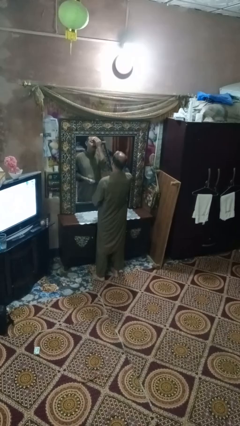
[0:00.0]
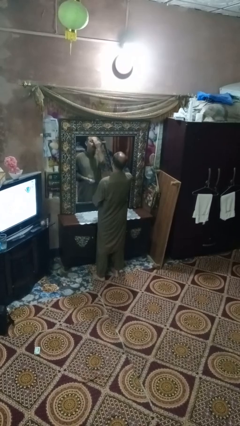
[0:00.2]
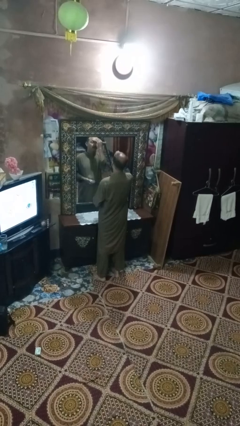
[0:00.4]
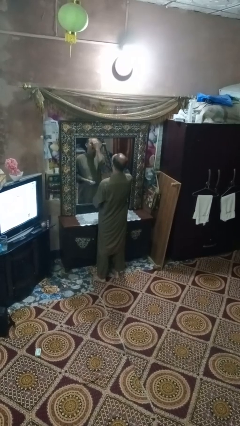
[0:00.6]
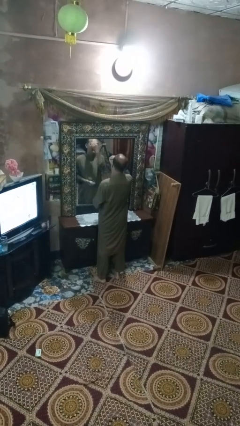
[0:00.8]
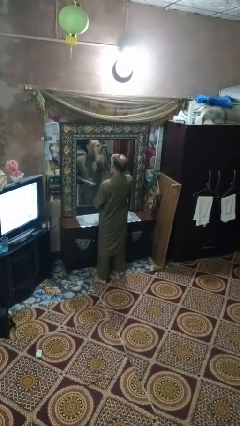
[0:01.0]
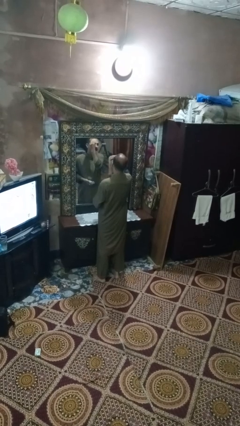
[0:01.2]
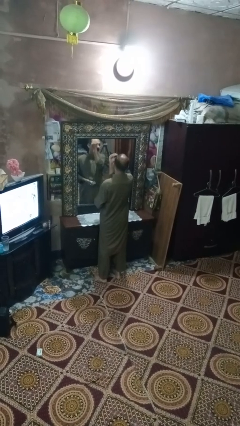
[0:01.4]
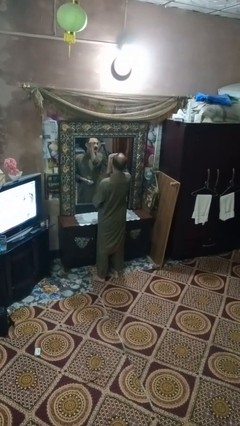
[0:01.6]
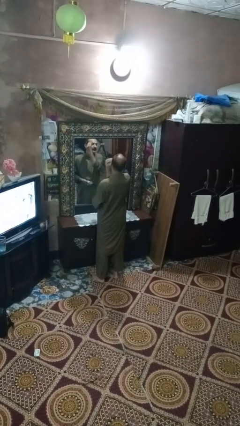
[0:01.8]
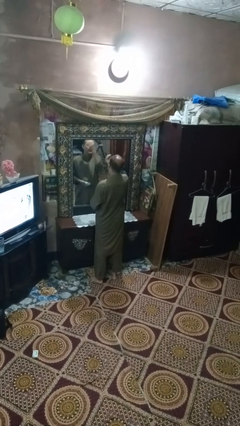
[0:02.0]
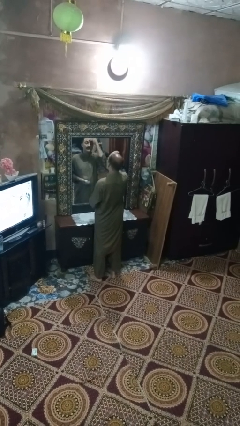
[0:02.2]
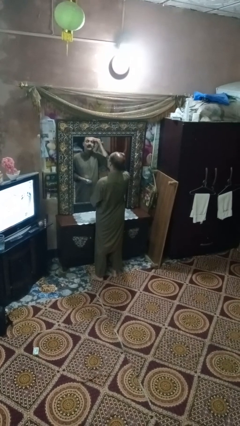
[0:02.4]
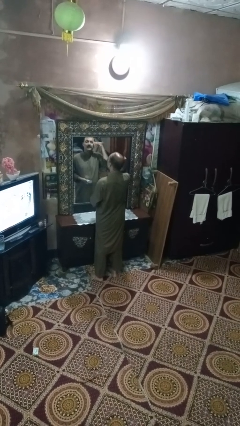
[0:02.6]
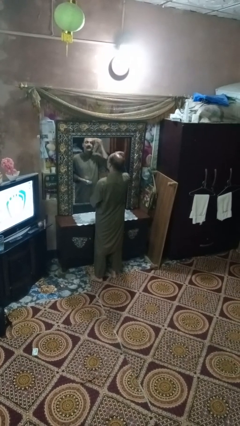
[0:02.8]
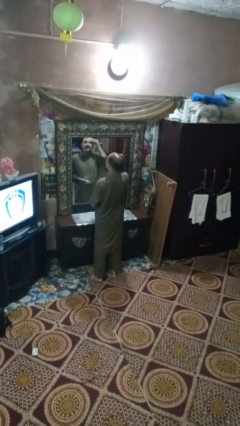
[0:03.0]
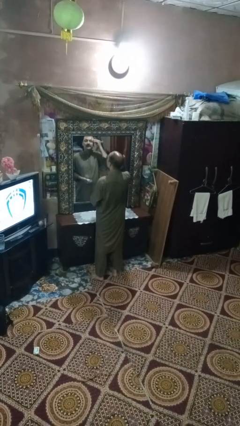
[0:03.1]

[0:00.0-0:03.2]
person applies foundation makeup

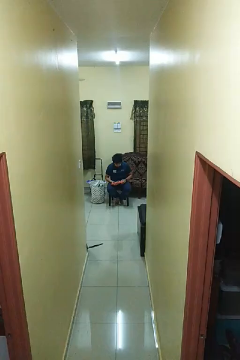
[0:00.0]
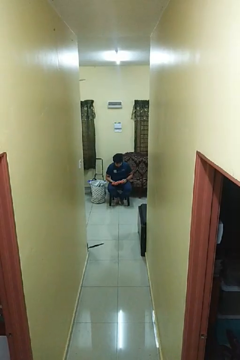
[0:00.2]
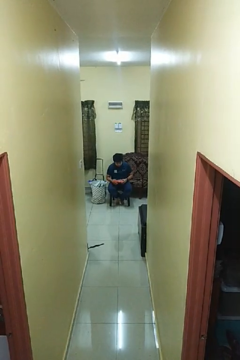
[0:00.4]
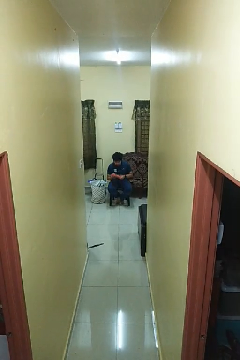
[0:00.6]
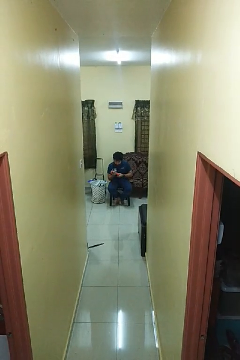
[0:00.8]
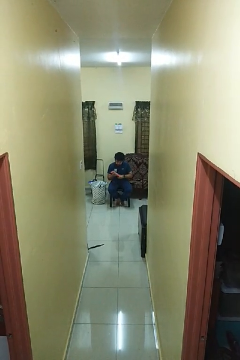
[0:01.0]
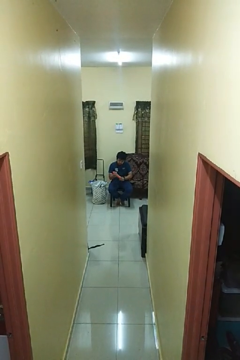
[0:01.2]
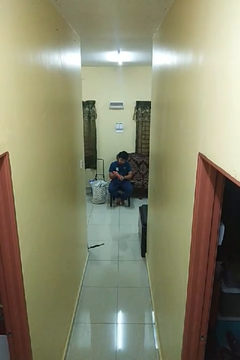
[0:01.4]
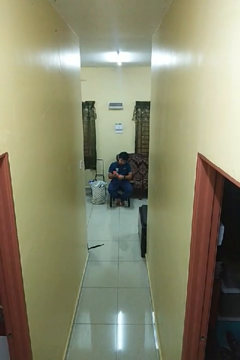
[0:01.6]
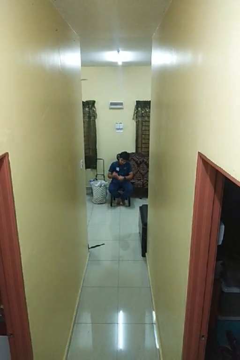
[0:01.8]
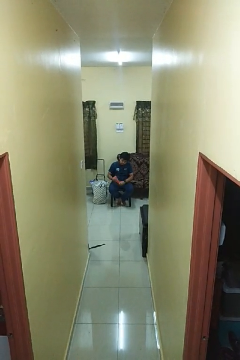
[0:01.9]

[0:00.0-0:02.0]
person squeezes object

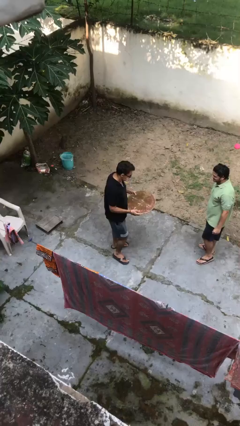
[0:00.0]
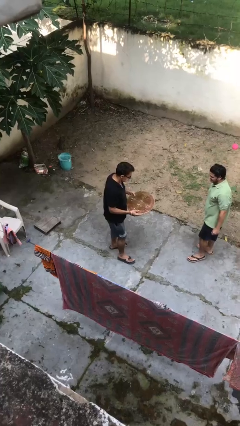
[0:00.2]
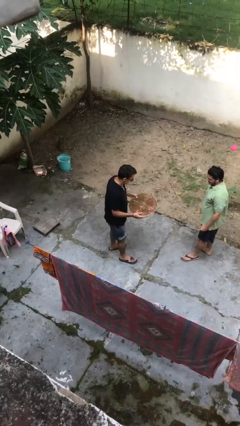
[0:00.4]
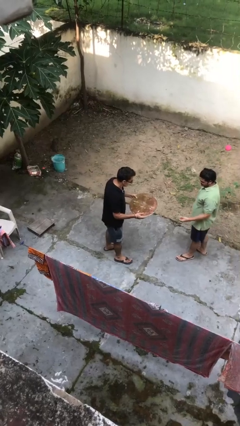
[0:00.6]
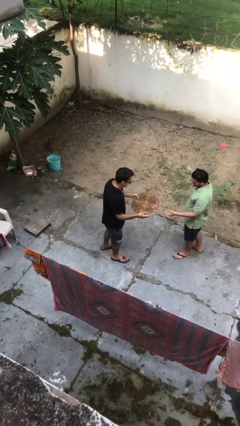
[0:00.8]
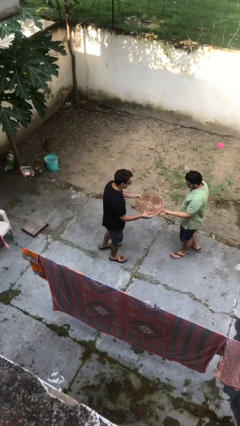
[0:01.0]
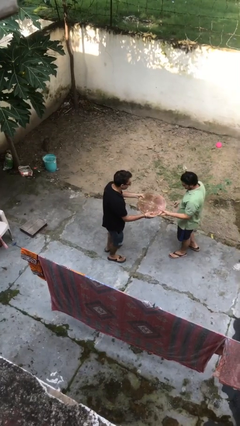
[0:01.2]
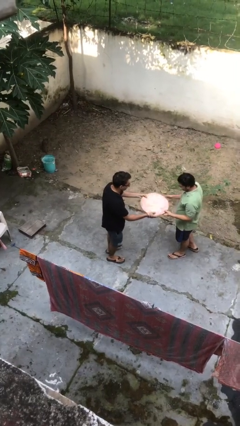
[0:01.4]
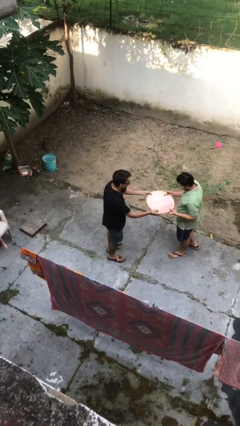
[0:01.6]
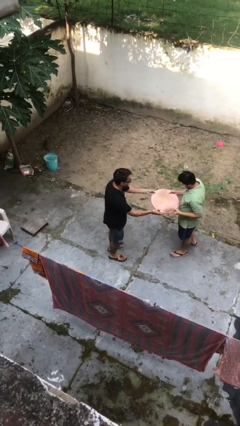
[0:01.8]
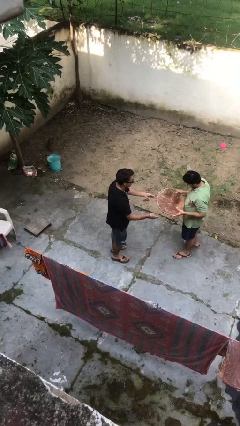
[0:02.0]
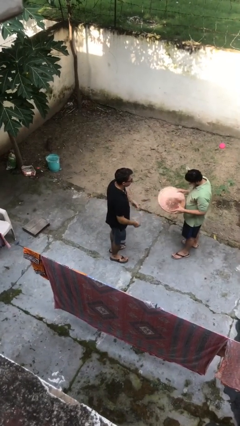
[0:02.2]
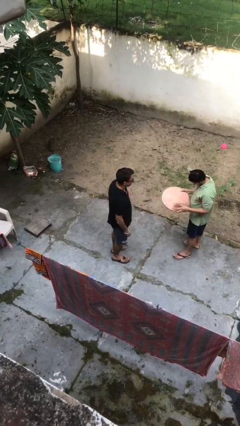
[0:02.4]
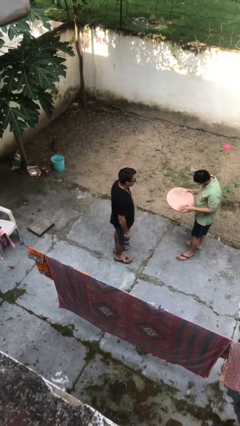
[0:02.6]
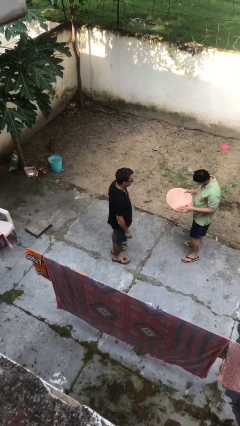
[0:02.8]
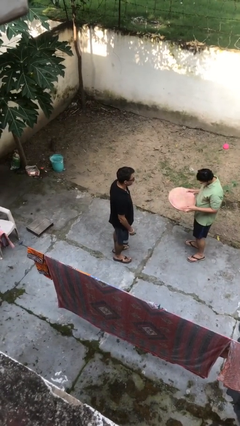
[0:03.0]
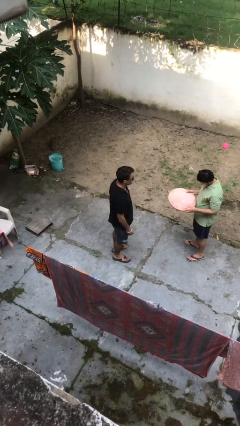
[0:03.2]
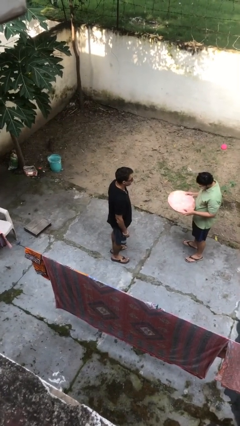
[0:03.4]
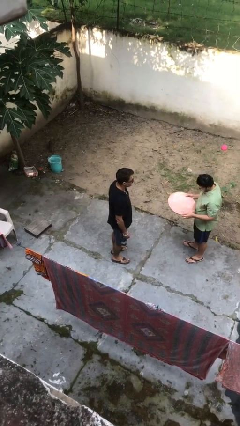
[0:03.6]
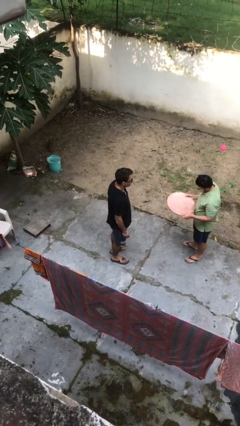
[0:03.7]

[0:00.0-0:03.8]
person transfers object to person

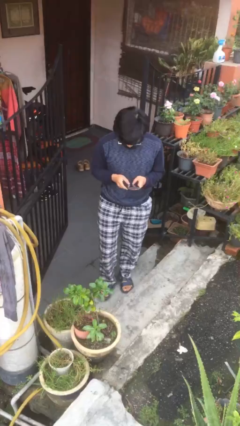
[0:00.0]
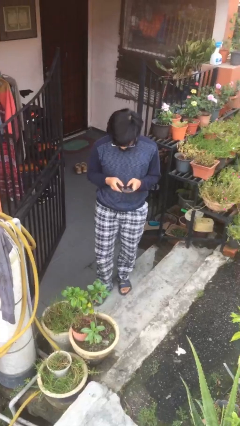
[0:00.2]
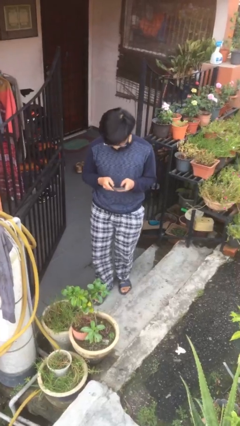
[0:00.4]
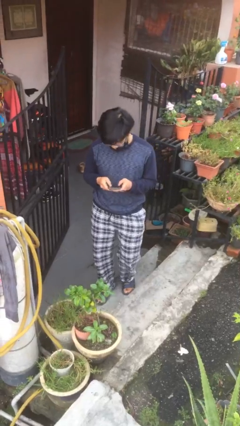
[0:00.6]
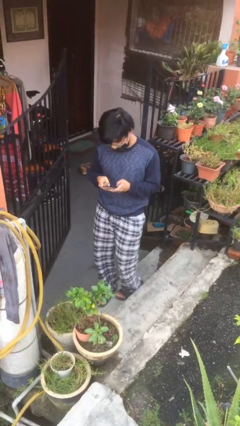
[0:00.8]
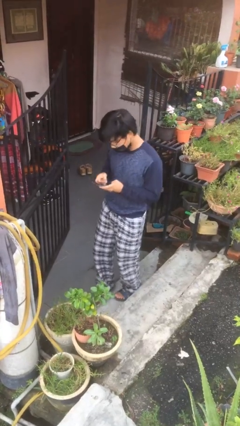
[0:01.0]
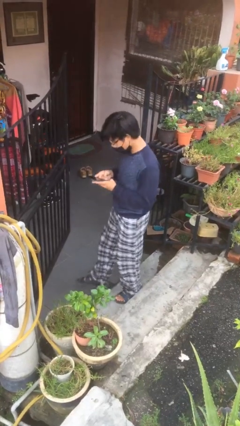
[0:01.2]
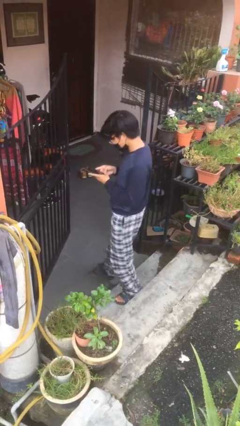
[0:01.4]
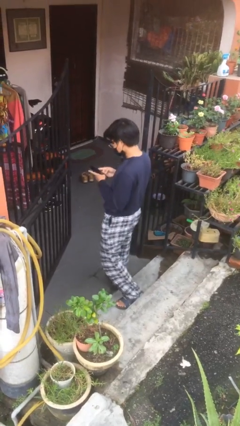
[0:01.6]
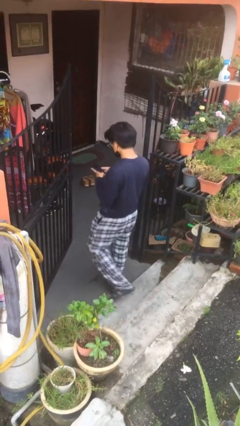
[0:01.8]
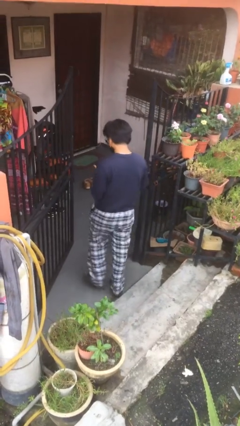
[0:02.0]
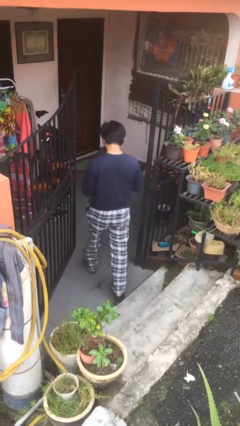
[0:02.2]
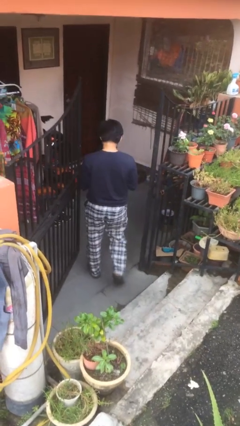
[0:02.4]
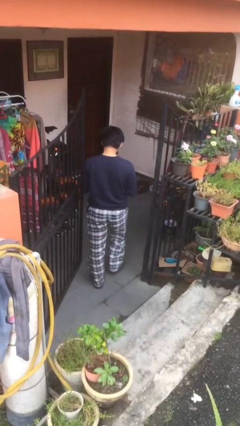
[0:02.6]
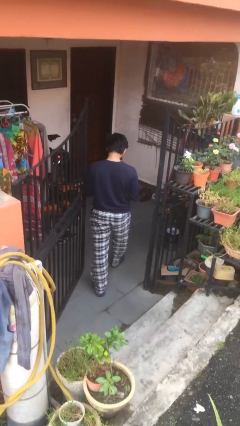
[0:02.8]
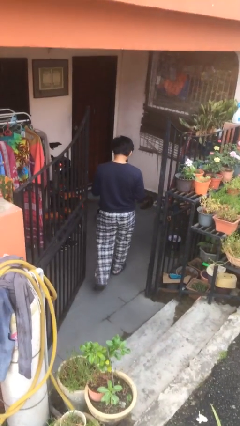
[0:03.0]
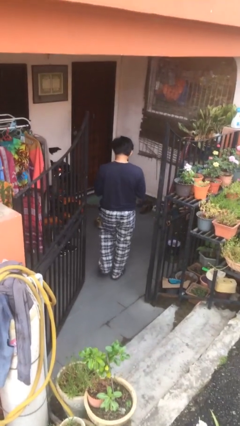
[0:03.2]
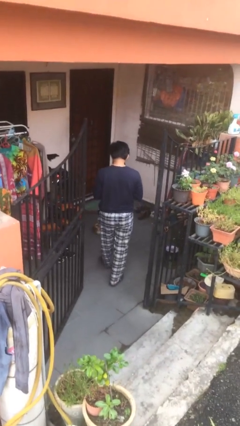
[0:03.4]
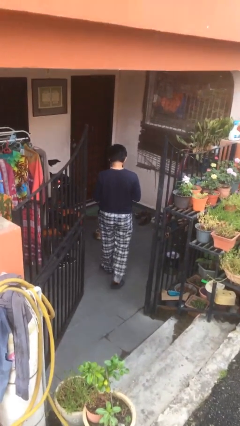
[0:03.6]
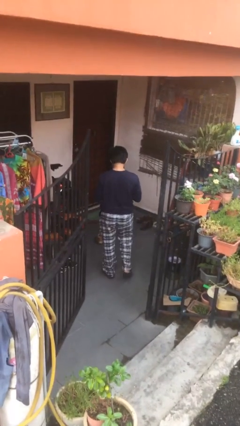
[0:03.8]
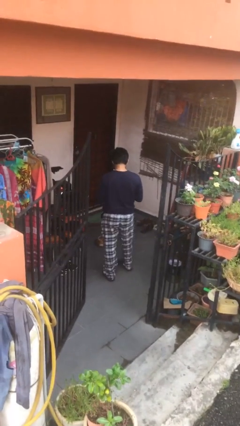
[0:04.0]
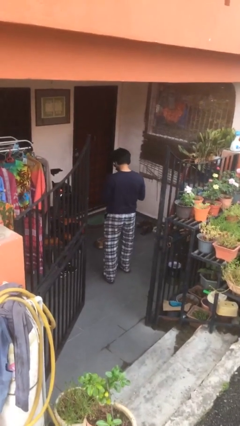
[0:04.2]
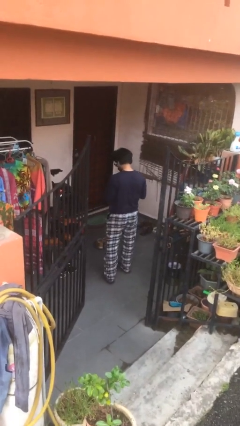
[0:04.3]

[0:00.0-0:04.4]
person exits scene through structure

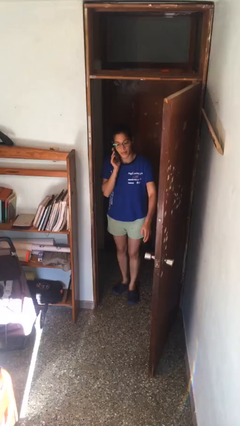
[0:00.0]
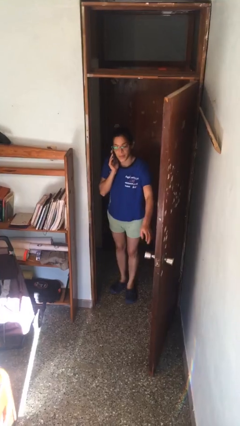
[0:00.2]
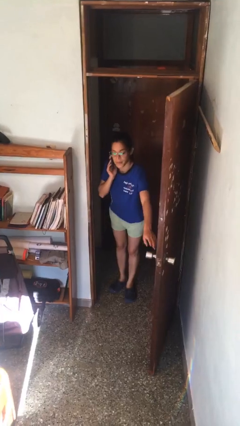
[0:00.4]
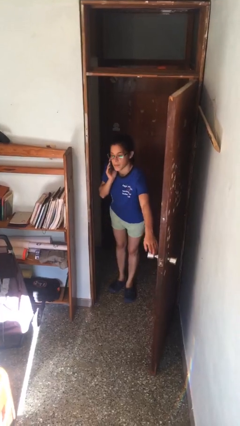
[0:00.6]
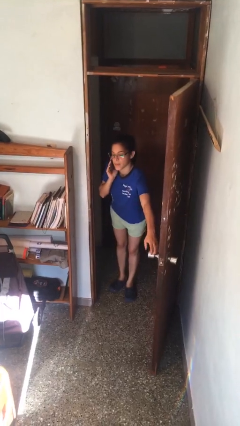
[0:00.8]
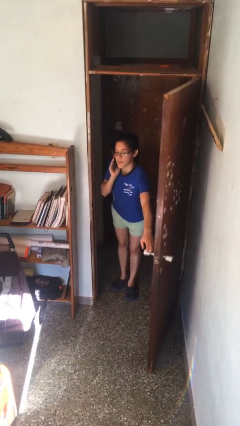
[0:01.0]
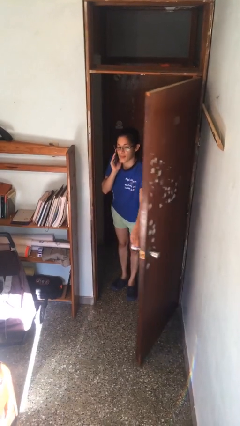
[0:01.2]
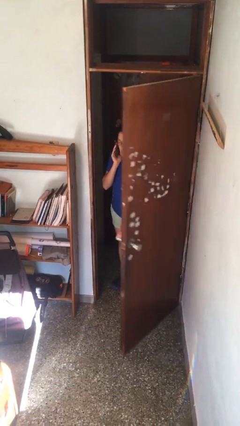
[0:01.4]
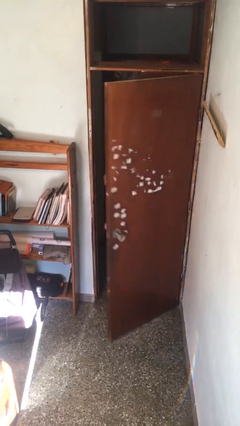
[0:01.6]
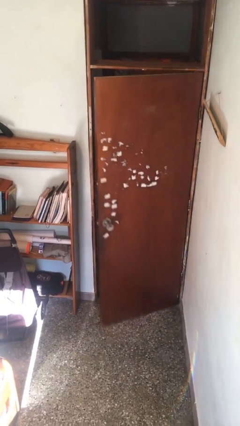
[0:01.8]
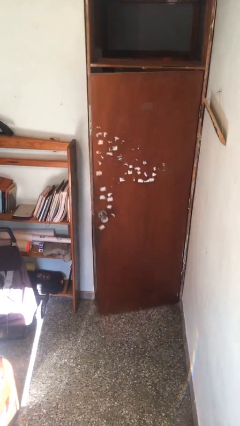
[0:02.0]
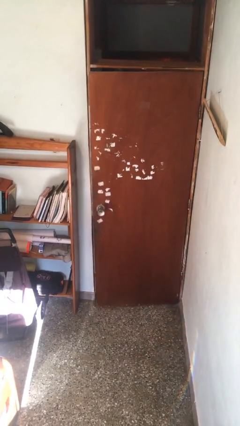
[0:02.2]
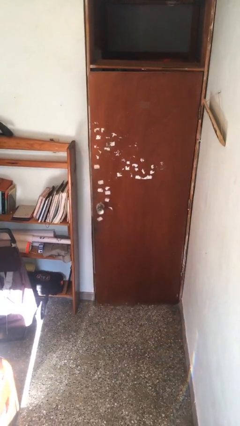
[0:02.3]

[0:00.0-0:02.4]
person closes facility door

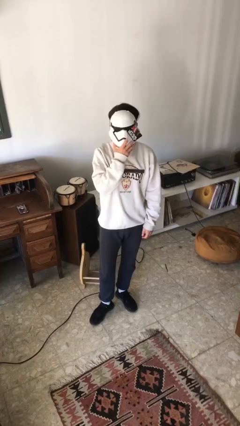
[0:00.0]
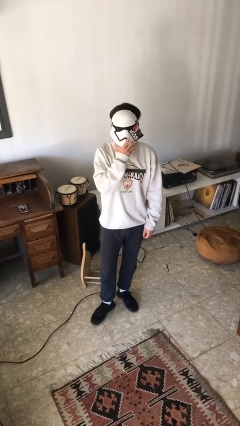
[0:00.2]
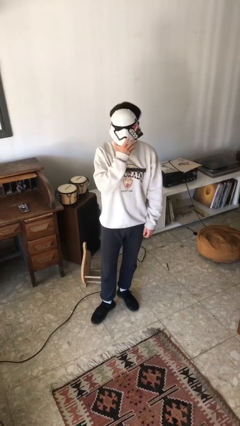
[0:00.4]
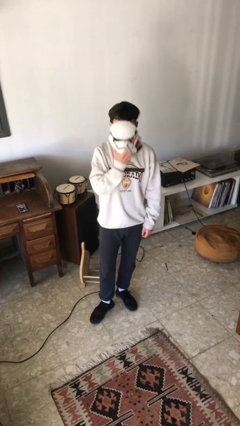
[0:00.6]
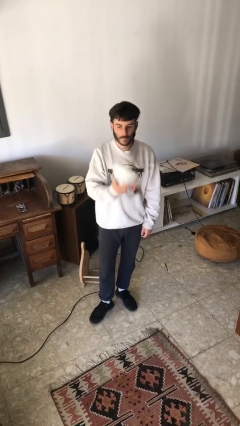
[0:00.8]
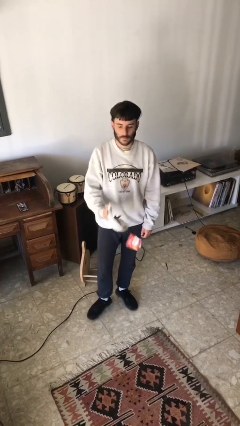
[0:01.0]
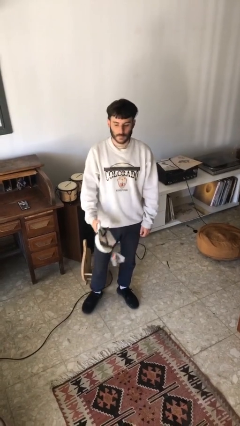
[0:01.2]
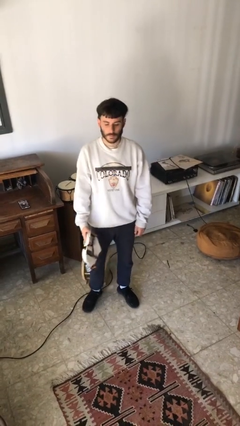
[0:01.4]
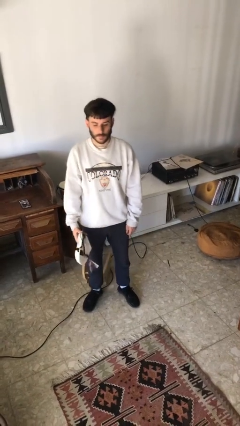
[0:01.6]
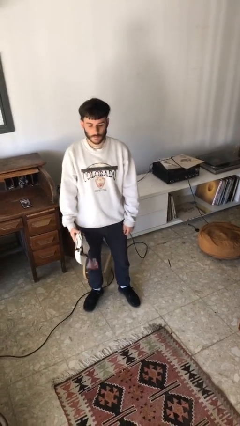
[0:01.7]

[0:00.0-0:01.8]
person takes off facemask

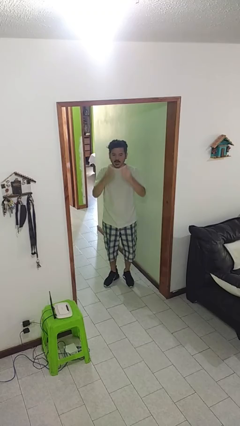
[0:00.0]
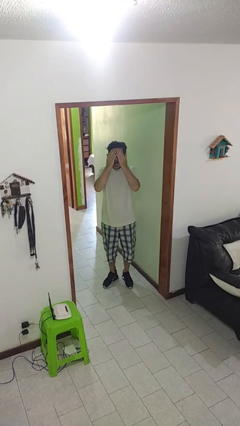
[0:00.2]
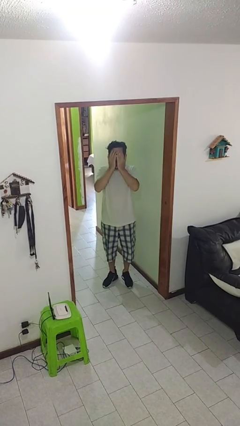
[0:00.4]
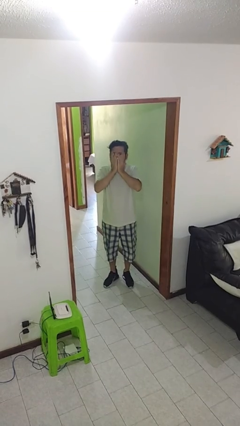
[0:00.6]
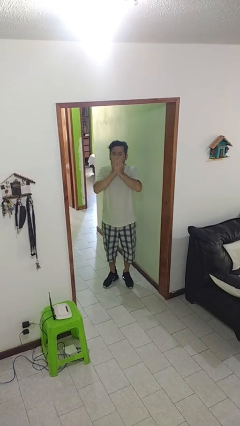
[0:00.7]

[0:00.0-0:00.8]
person covers face with hands
